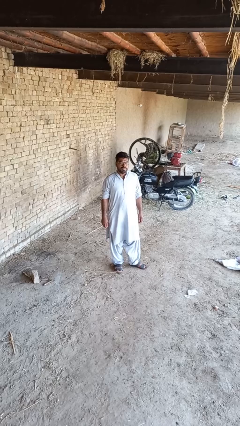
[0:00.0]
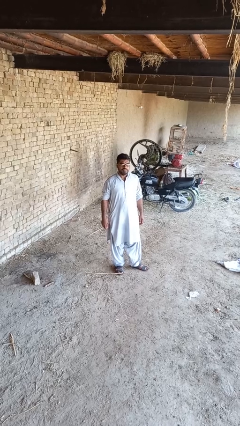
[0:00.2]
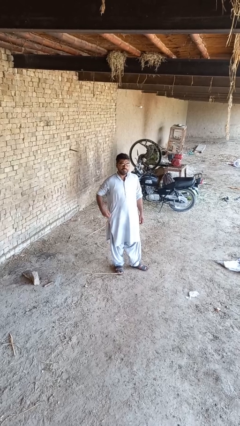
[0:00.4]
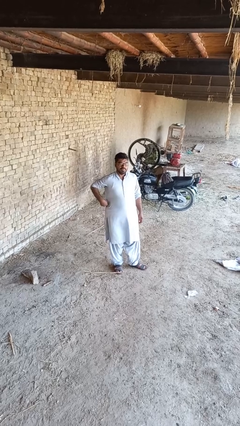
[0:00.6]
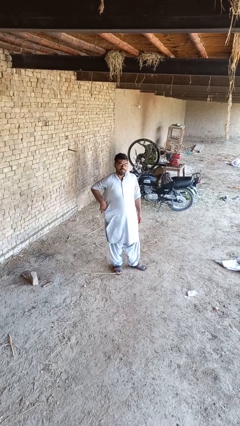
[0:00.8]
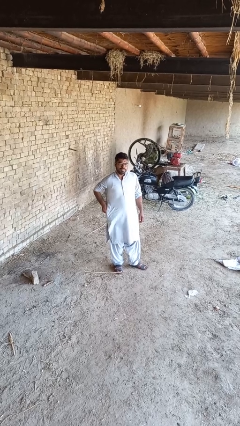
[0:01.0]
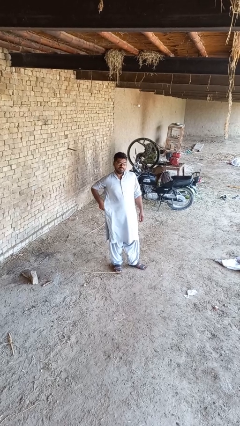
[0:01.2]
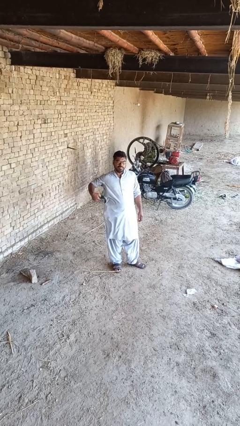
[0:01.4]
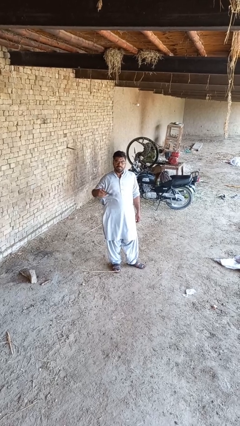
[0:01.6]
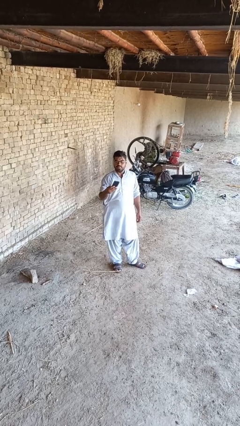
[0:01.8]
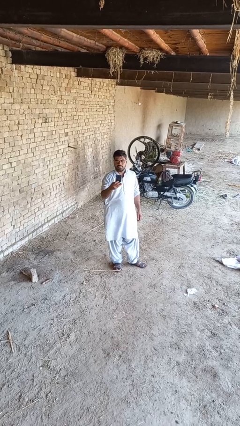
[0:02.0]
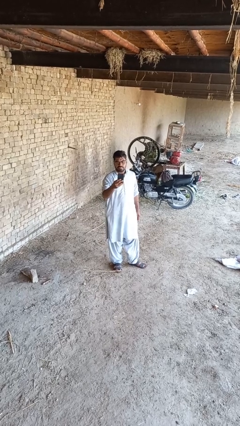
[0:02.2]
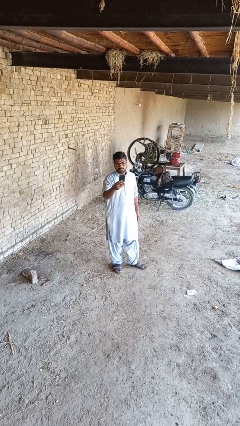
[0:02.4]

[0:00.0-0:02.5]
person takes phone from pocket

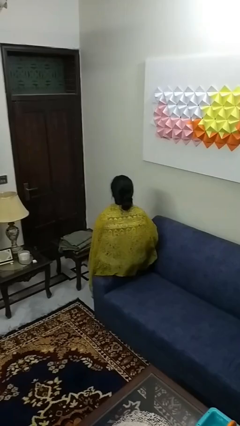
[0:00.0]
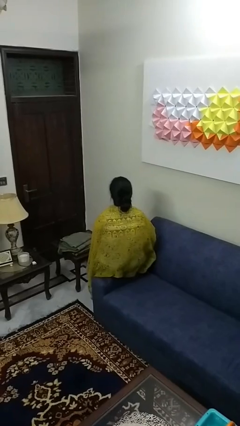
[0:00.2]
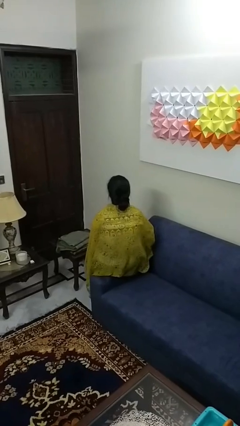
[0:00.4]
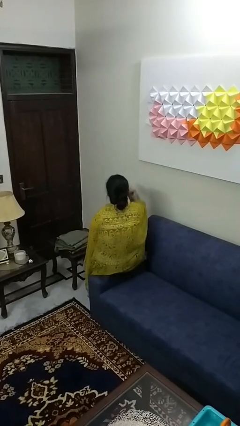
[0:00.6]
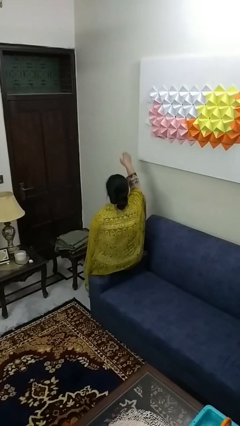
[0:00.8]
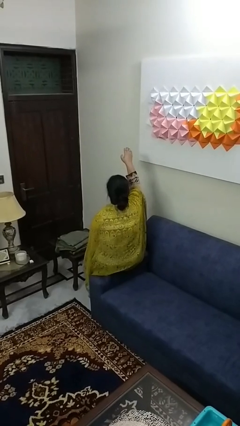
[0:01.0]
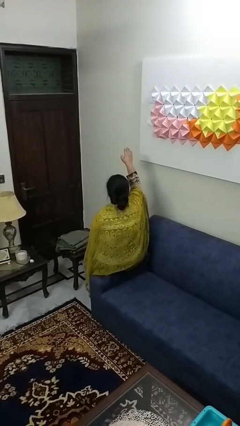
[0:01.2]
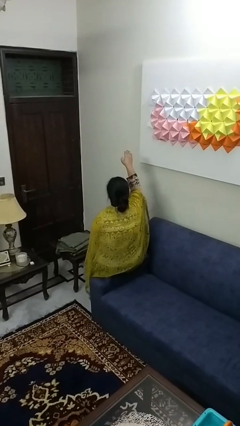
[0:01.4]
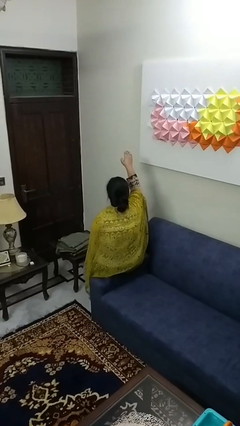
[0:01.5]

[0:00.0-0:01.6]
person gestures swipe up

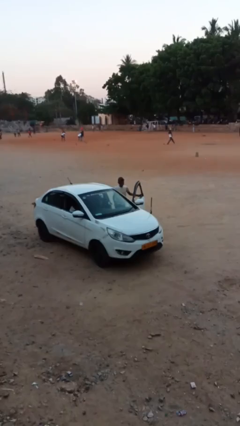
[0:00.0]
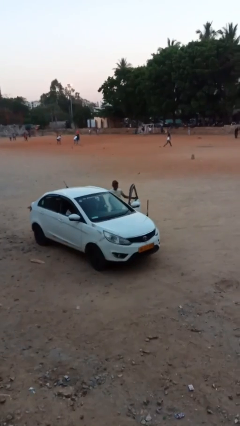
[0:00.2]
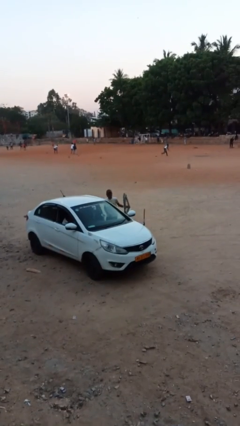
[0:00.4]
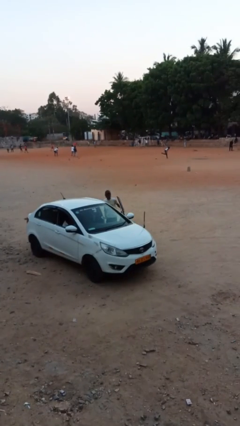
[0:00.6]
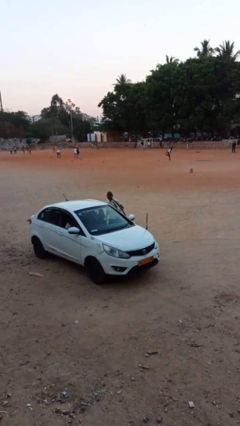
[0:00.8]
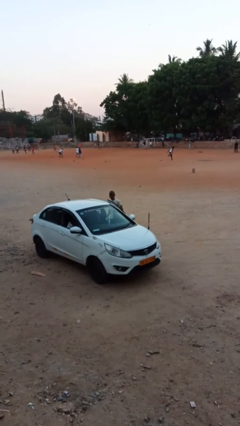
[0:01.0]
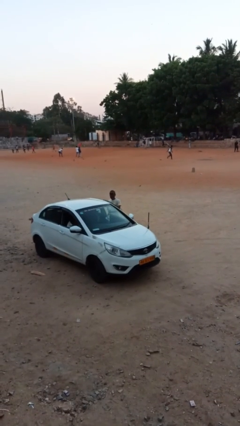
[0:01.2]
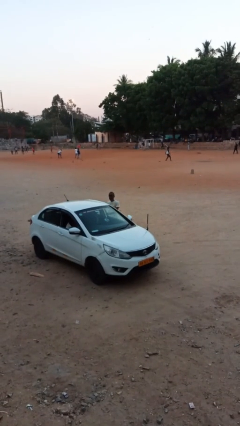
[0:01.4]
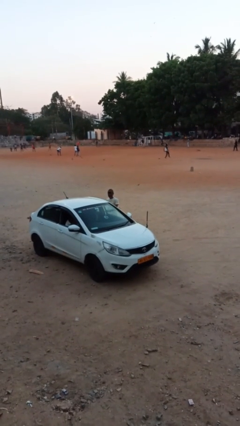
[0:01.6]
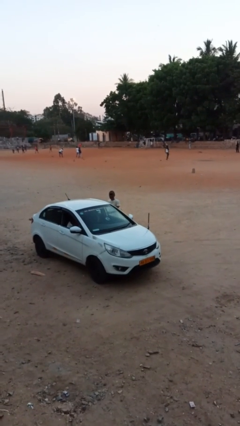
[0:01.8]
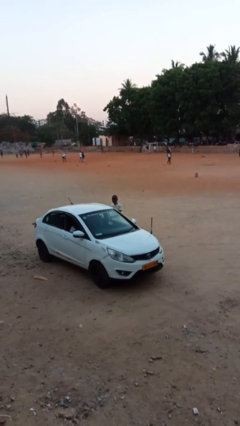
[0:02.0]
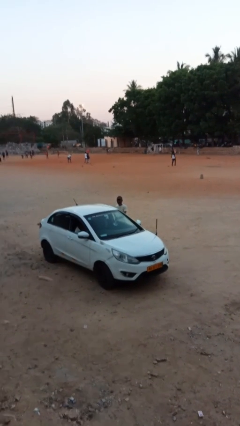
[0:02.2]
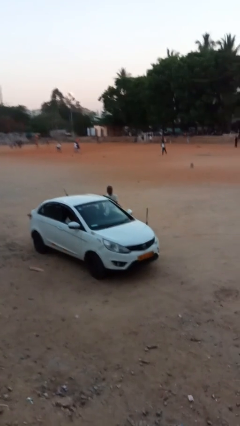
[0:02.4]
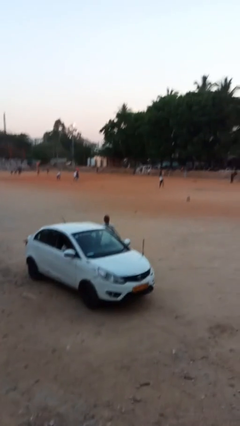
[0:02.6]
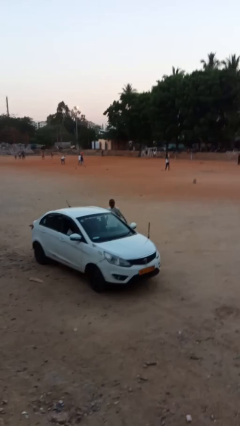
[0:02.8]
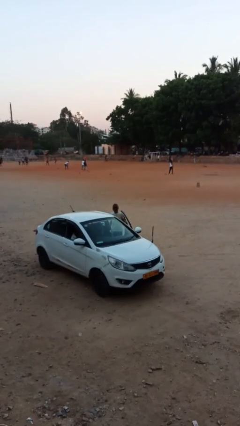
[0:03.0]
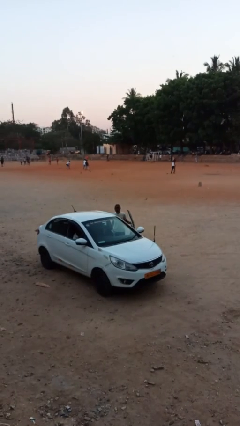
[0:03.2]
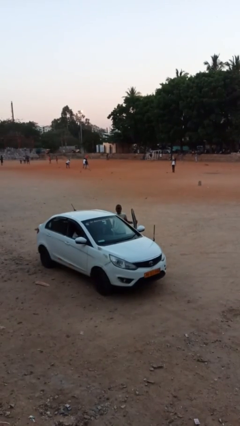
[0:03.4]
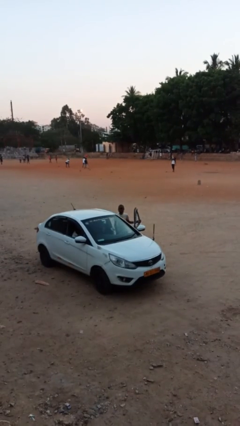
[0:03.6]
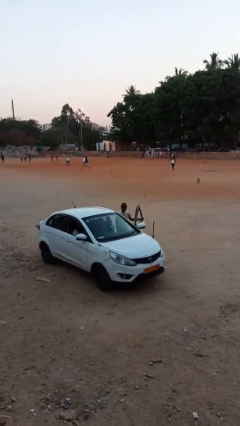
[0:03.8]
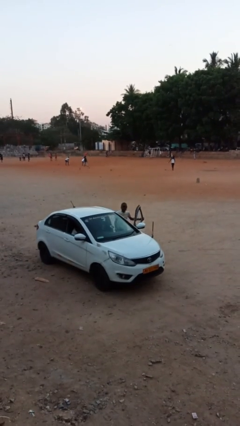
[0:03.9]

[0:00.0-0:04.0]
person exits car

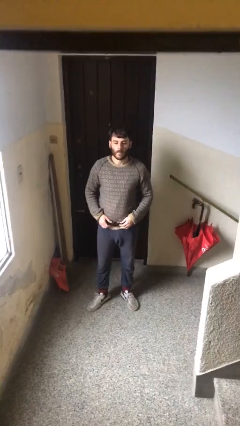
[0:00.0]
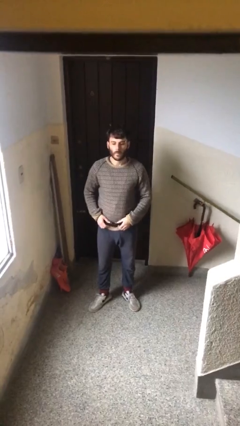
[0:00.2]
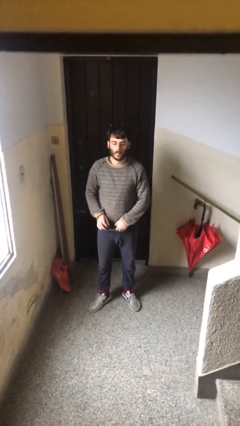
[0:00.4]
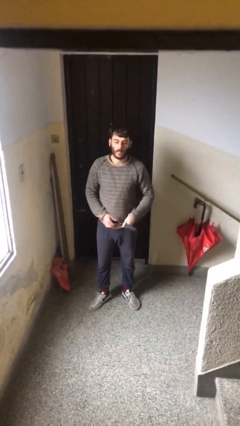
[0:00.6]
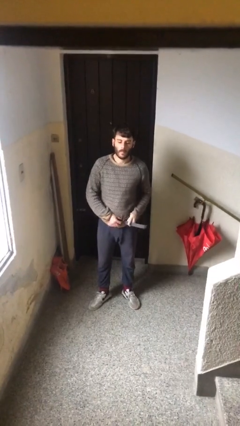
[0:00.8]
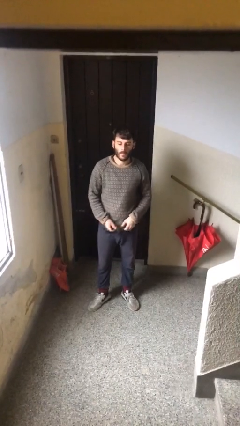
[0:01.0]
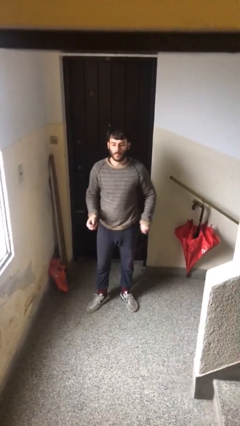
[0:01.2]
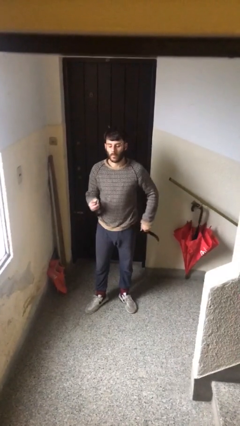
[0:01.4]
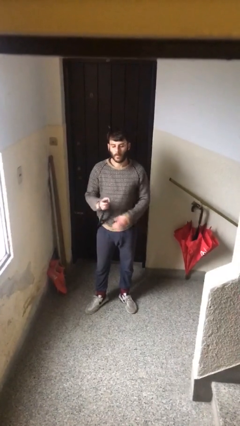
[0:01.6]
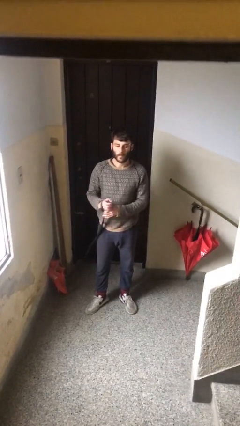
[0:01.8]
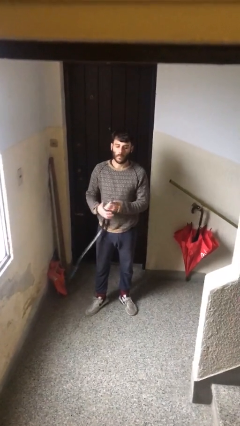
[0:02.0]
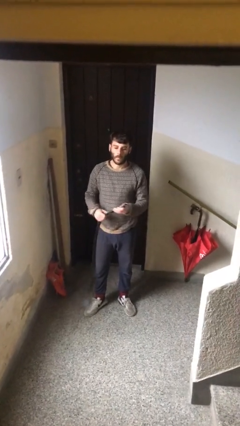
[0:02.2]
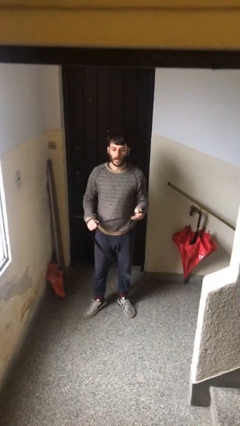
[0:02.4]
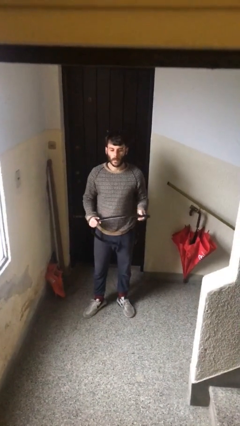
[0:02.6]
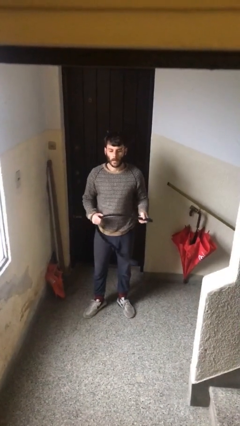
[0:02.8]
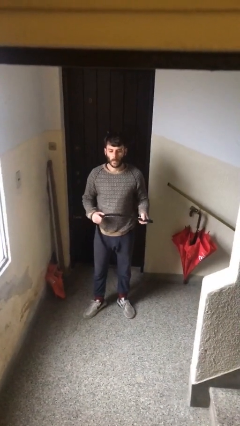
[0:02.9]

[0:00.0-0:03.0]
person takes off belt

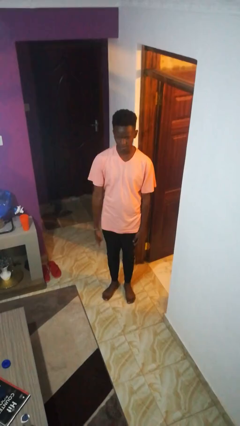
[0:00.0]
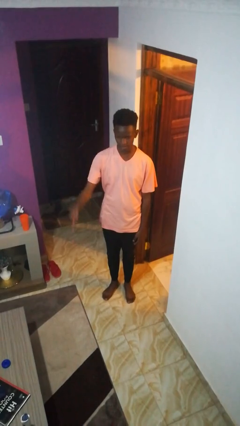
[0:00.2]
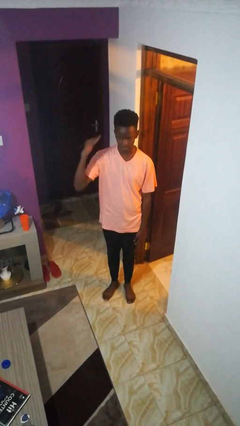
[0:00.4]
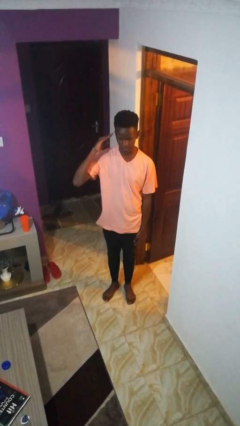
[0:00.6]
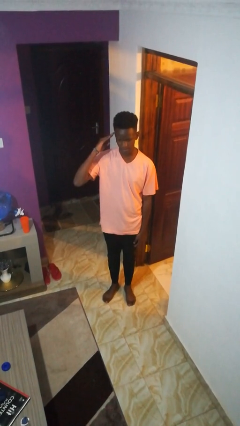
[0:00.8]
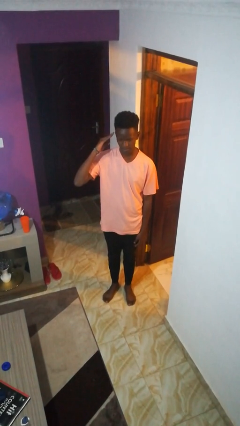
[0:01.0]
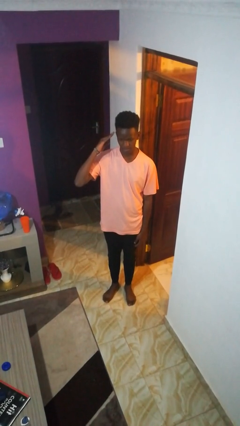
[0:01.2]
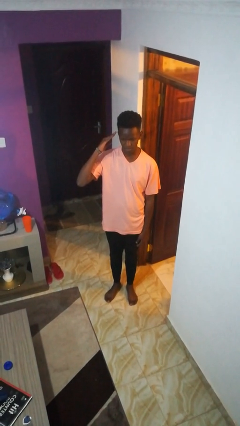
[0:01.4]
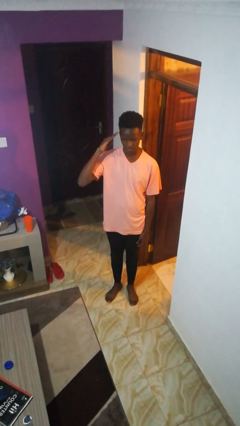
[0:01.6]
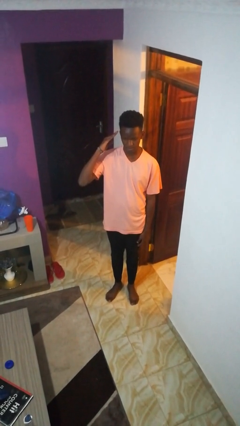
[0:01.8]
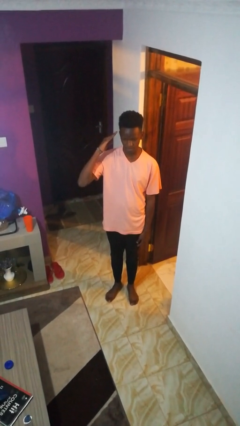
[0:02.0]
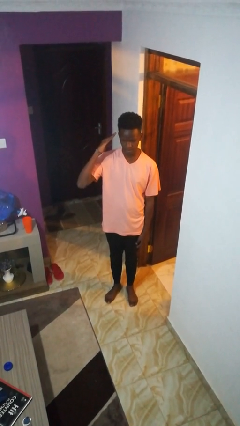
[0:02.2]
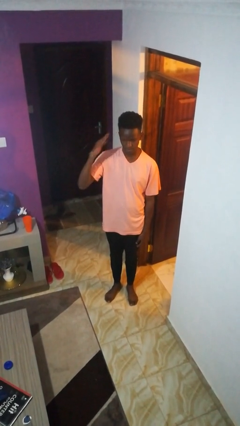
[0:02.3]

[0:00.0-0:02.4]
person salutes

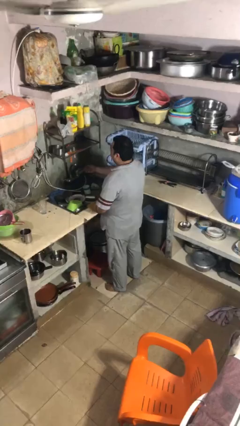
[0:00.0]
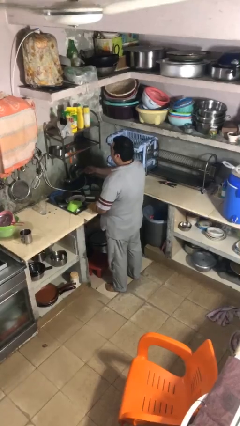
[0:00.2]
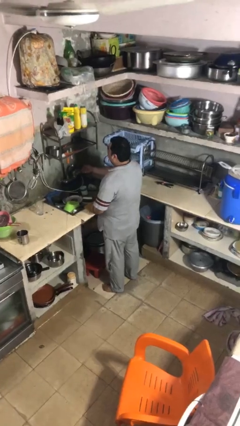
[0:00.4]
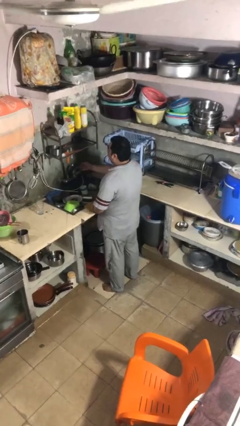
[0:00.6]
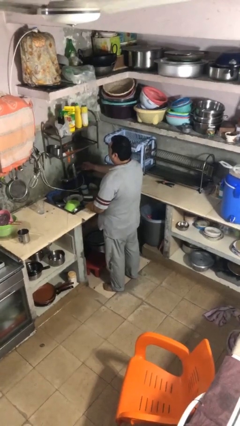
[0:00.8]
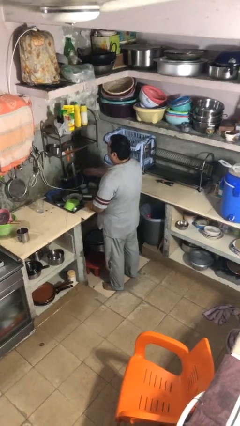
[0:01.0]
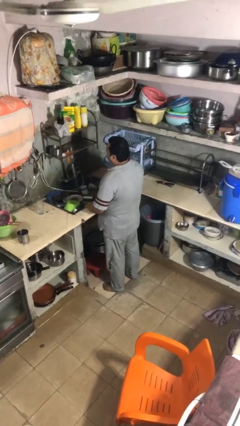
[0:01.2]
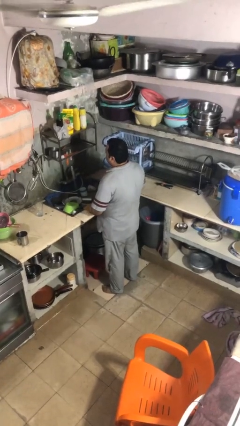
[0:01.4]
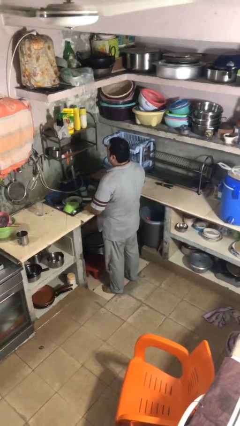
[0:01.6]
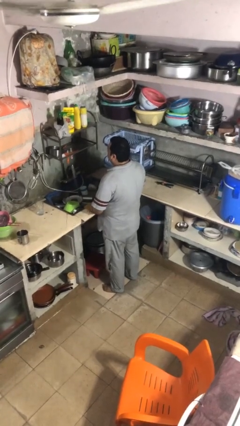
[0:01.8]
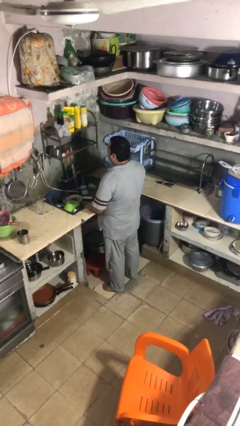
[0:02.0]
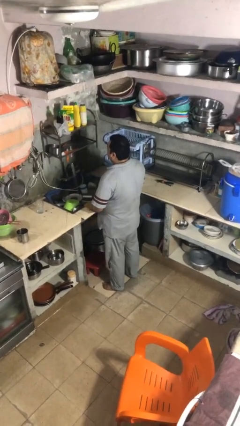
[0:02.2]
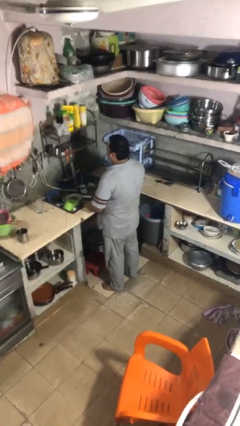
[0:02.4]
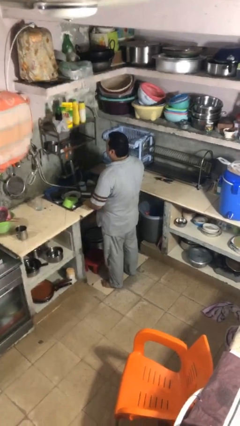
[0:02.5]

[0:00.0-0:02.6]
person turns on faucet

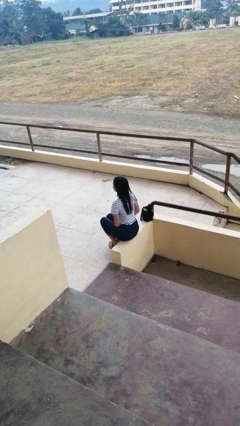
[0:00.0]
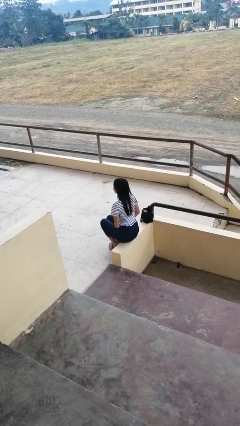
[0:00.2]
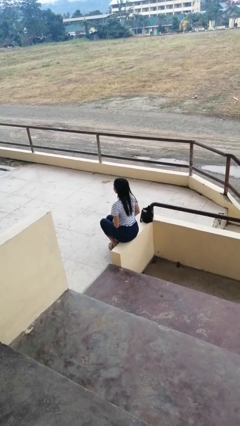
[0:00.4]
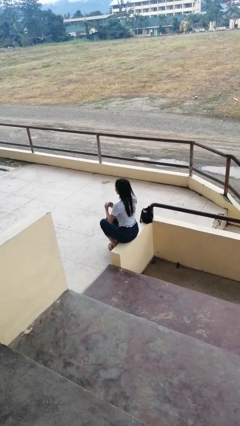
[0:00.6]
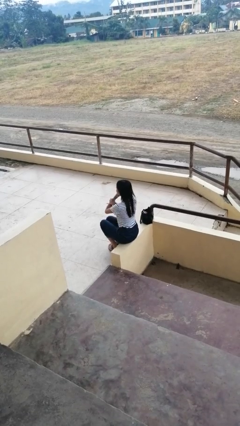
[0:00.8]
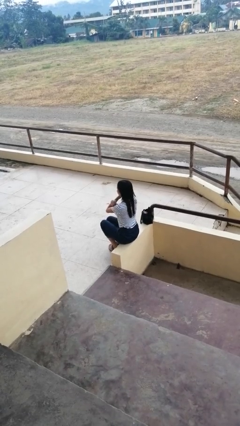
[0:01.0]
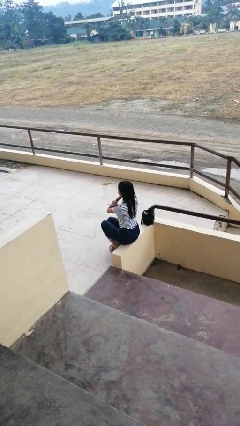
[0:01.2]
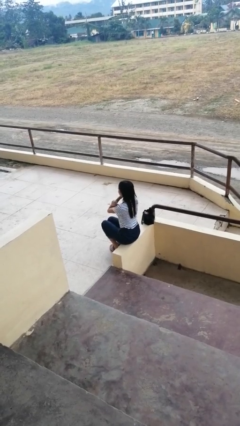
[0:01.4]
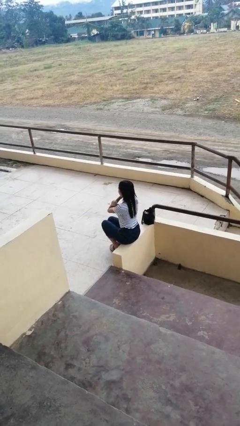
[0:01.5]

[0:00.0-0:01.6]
person gestures arms x
